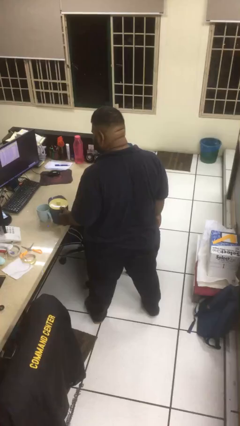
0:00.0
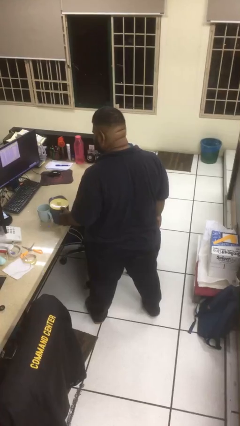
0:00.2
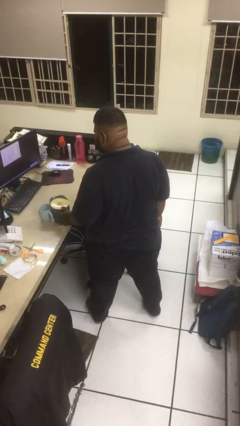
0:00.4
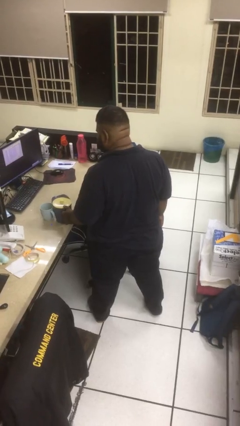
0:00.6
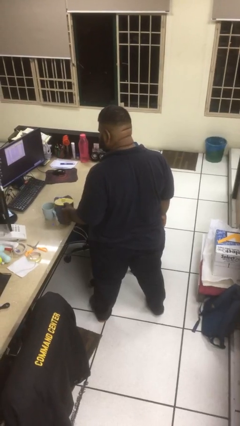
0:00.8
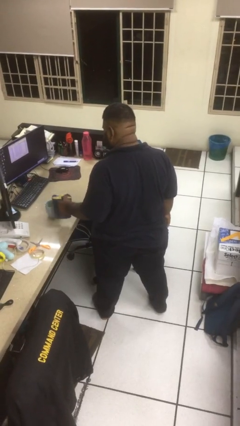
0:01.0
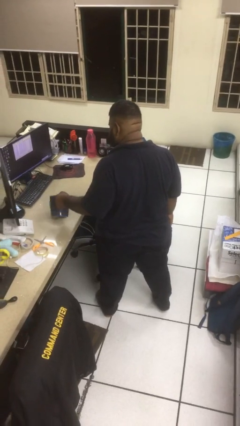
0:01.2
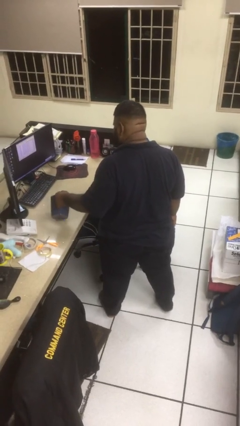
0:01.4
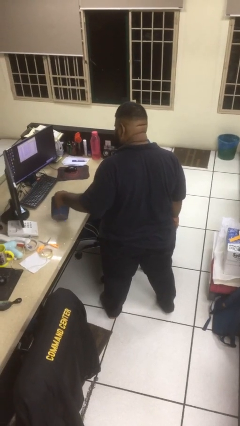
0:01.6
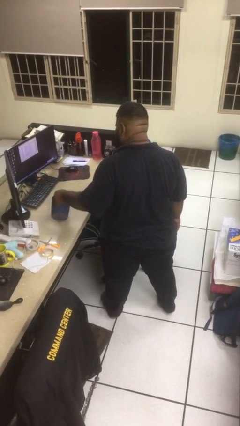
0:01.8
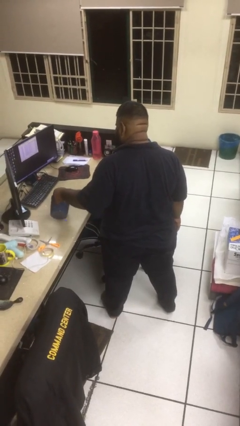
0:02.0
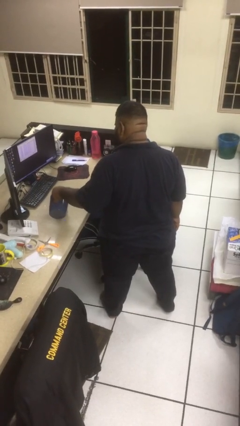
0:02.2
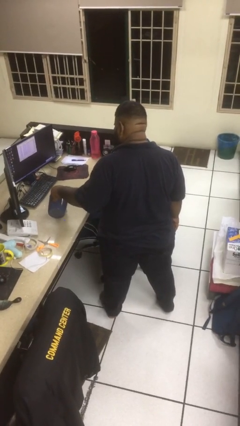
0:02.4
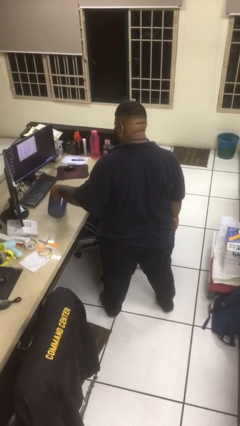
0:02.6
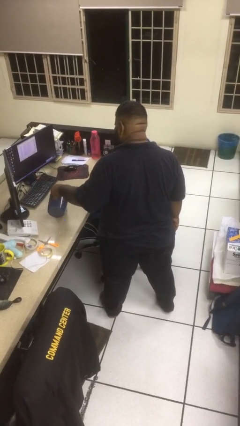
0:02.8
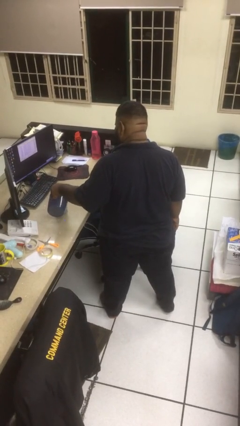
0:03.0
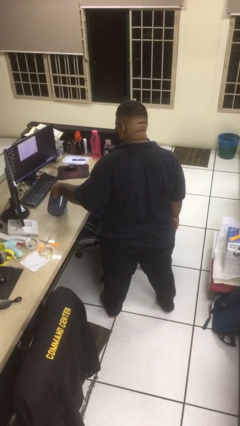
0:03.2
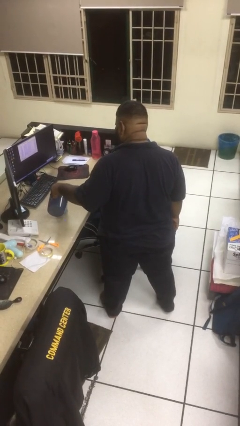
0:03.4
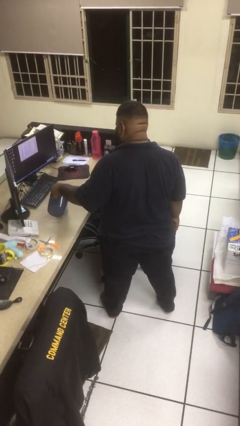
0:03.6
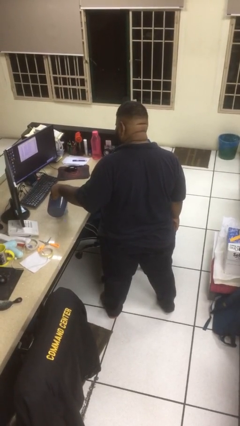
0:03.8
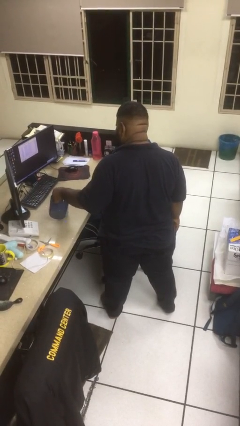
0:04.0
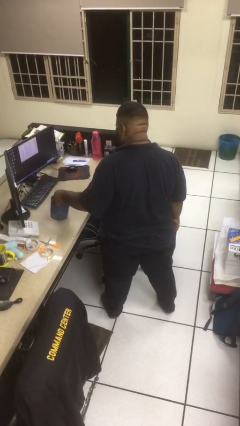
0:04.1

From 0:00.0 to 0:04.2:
person pours coffee into mug

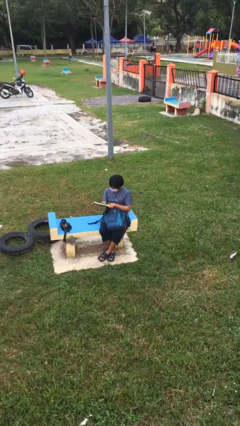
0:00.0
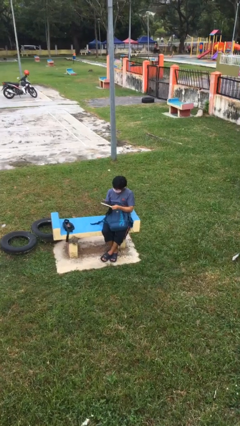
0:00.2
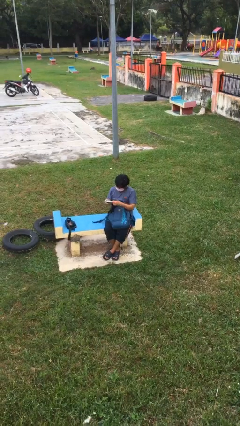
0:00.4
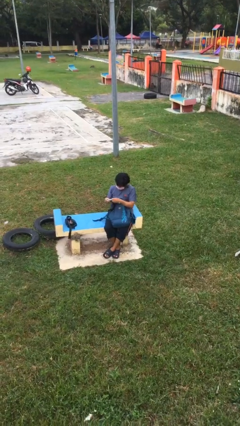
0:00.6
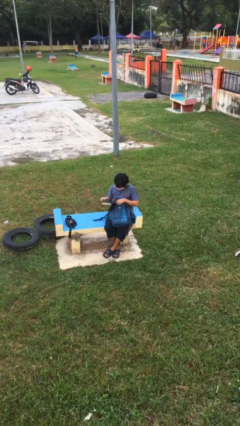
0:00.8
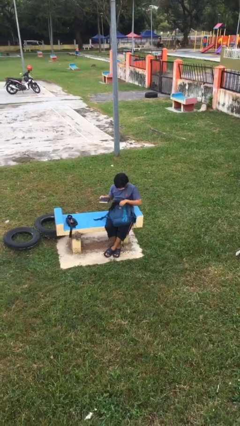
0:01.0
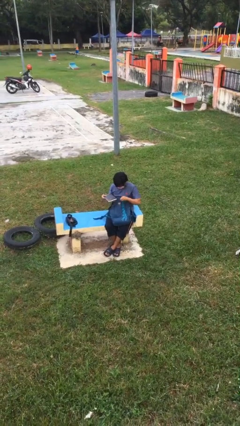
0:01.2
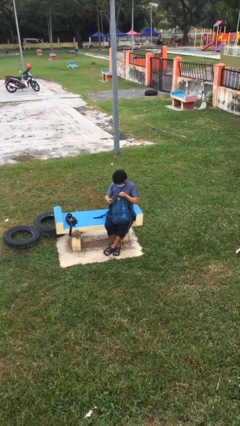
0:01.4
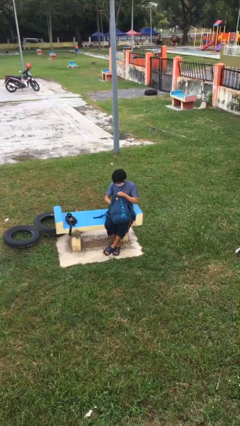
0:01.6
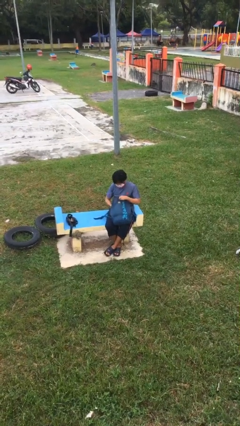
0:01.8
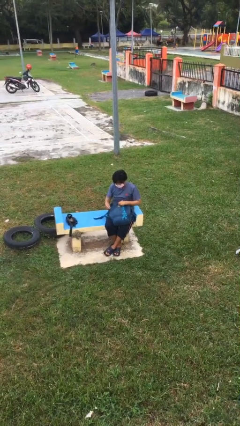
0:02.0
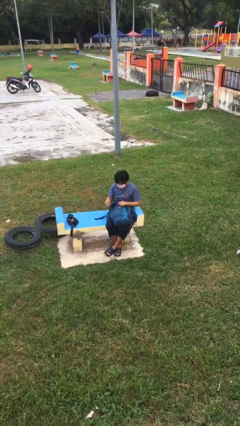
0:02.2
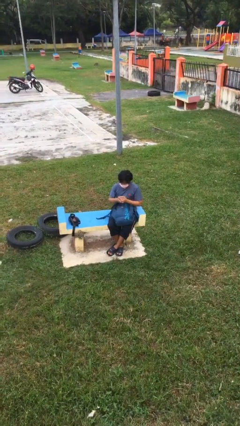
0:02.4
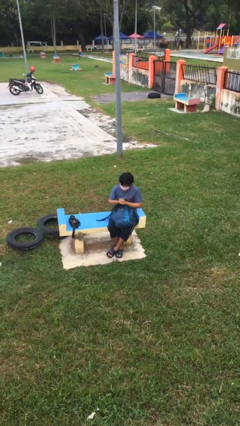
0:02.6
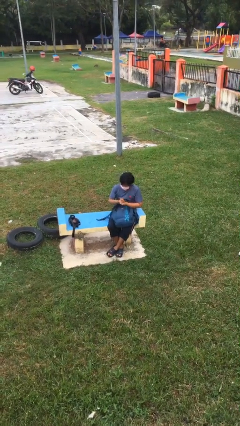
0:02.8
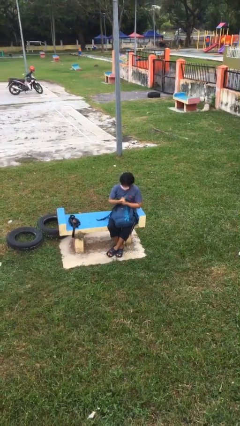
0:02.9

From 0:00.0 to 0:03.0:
person puts object into backpack

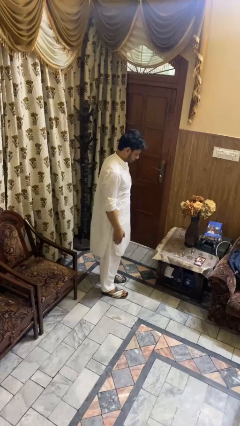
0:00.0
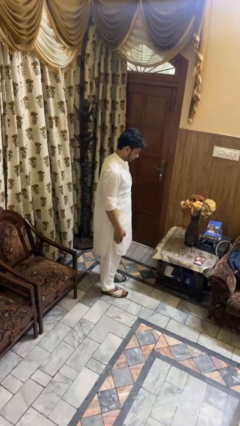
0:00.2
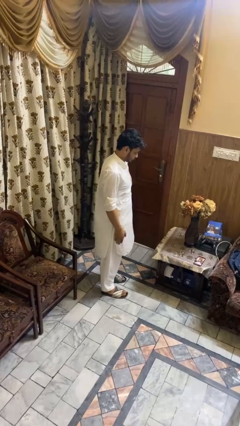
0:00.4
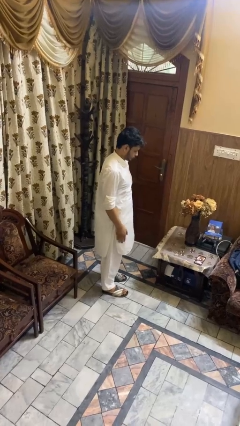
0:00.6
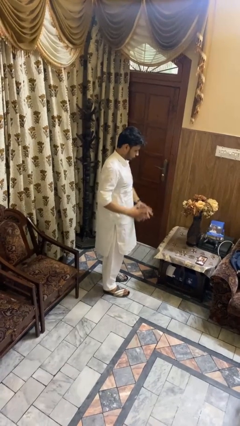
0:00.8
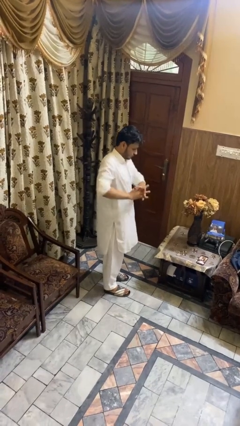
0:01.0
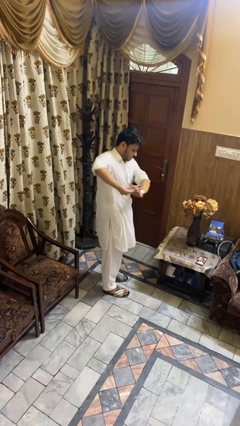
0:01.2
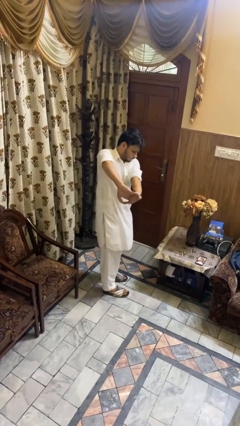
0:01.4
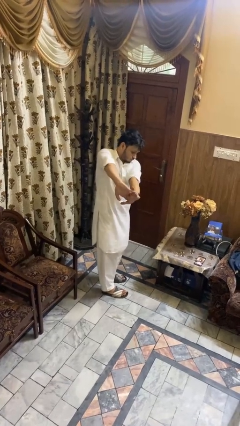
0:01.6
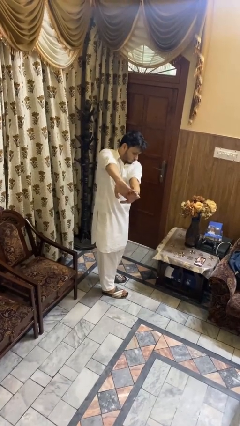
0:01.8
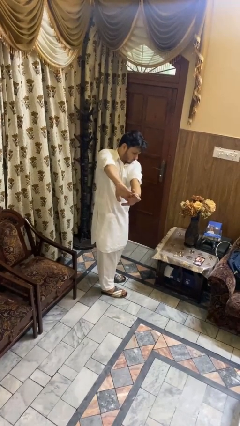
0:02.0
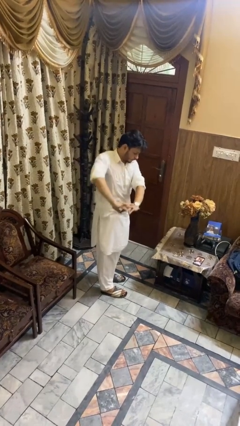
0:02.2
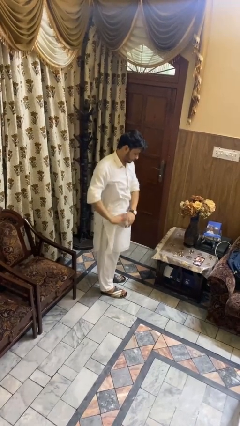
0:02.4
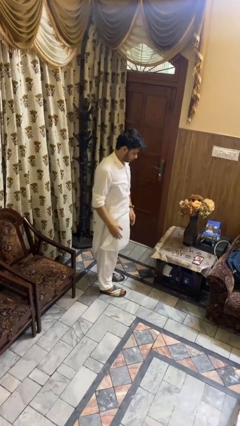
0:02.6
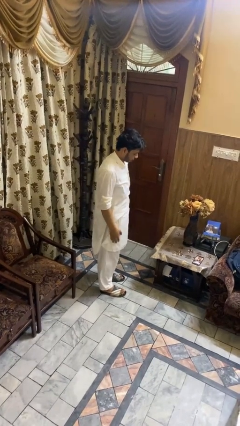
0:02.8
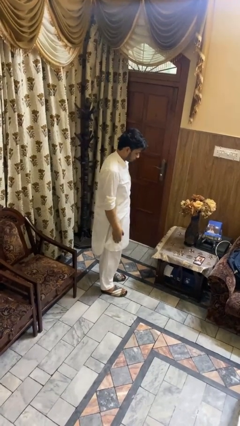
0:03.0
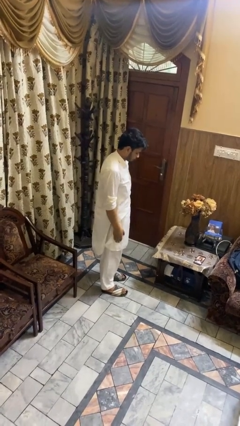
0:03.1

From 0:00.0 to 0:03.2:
person stretches arms to side

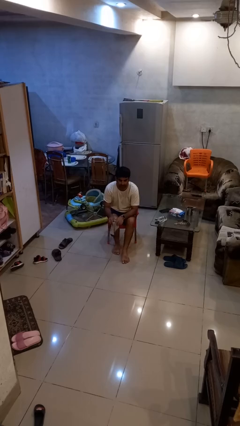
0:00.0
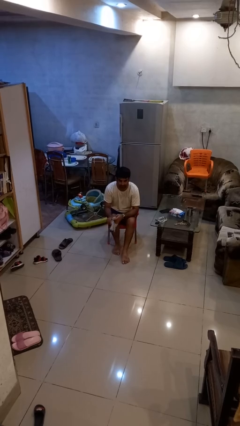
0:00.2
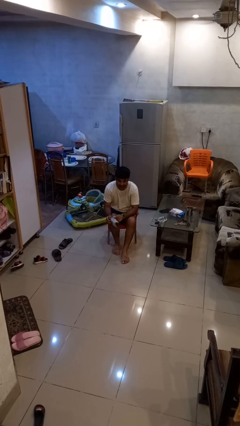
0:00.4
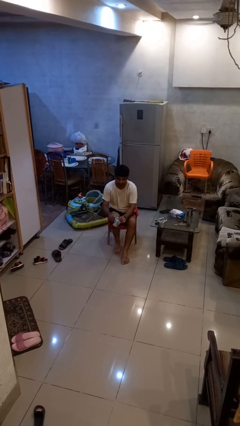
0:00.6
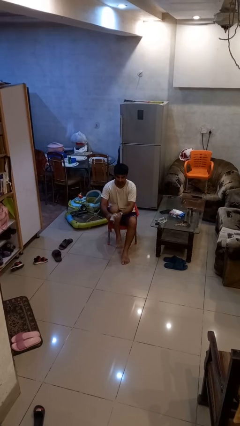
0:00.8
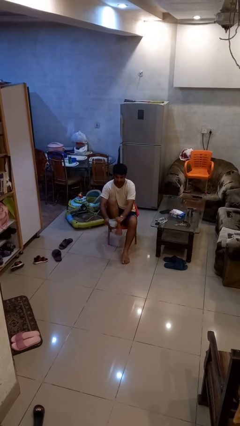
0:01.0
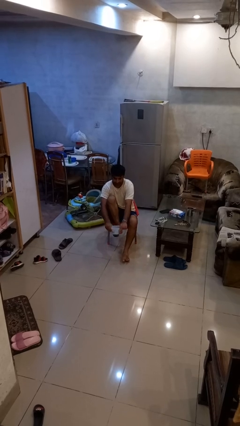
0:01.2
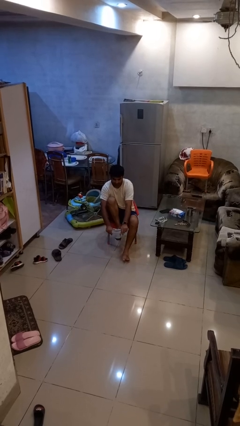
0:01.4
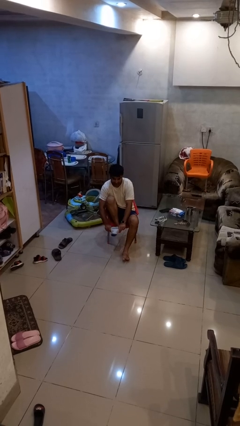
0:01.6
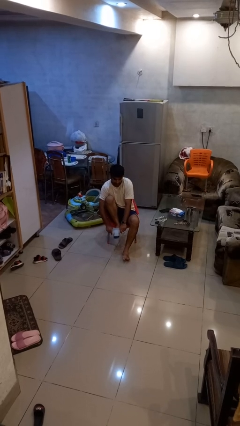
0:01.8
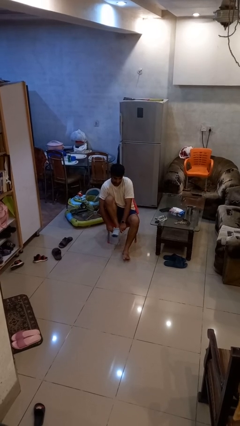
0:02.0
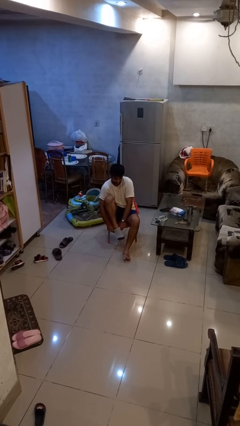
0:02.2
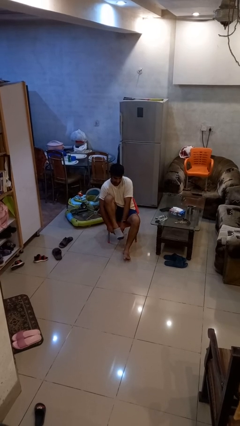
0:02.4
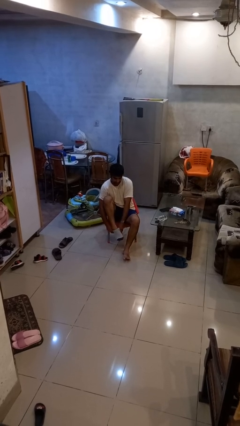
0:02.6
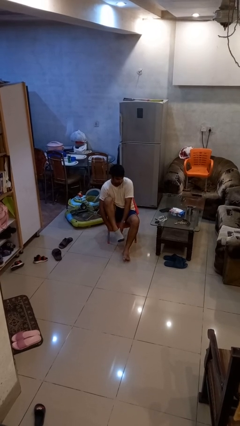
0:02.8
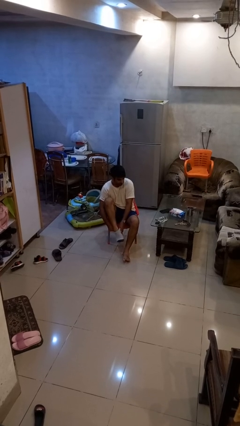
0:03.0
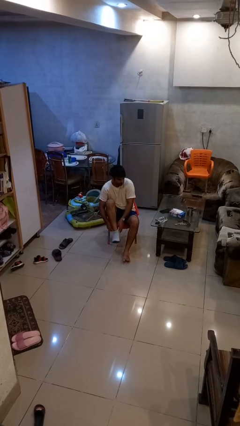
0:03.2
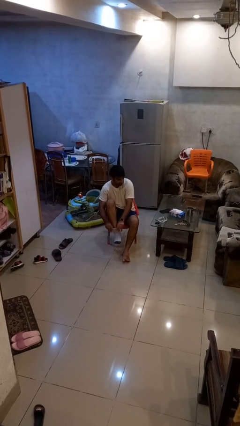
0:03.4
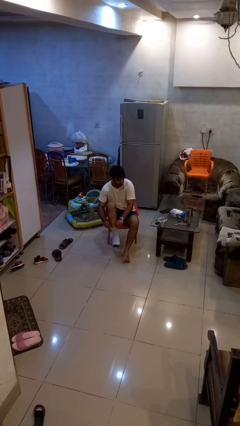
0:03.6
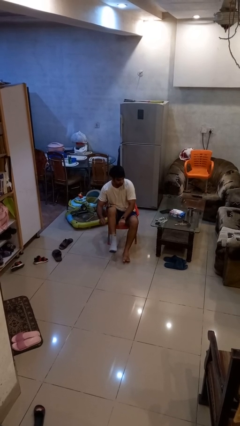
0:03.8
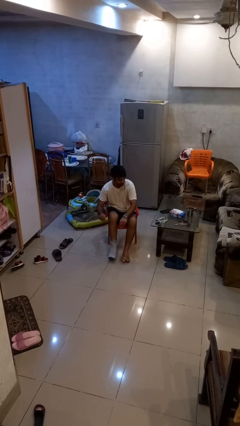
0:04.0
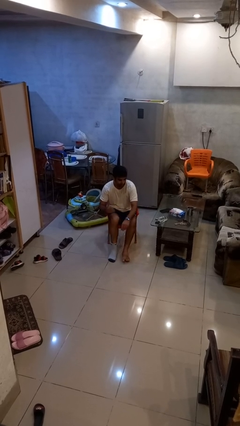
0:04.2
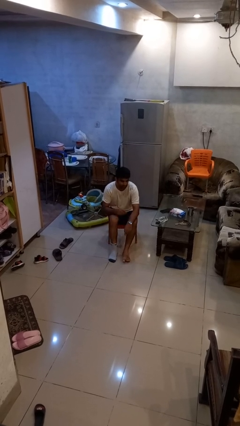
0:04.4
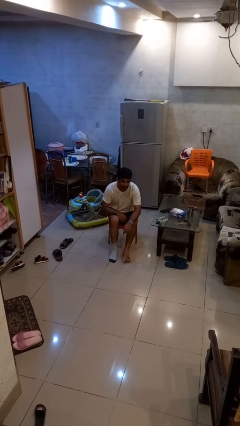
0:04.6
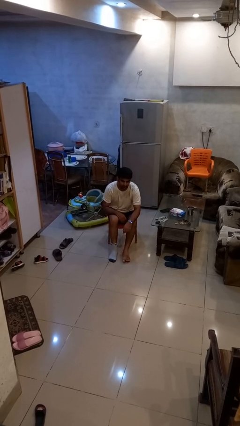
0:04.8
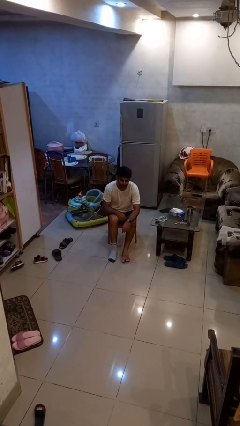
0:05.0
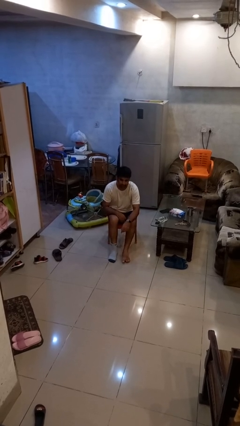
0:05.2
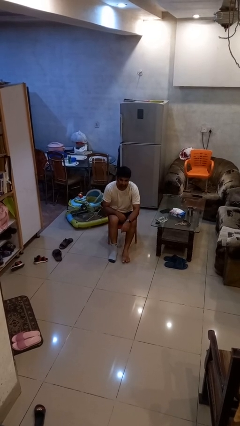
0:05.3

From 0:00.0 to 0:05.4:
person puts on socks

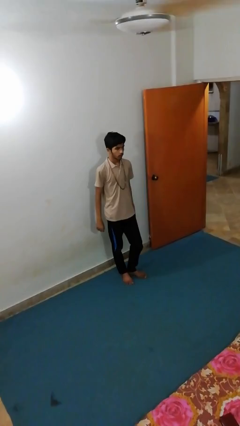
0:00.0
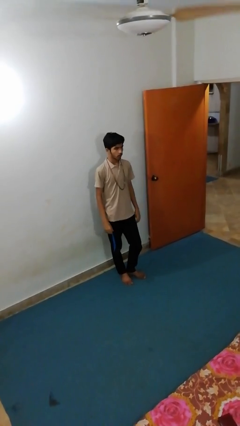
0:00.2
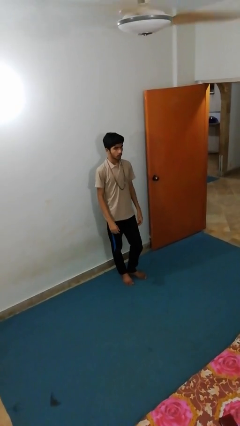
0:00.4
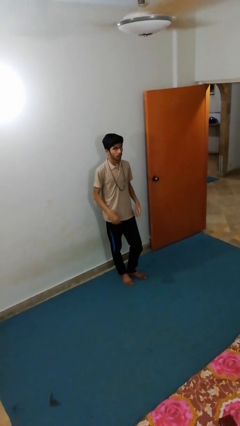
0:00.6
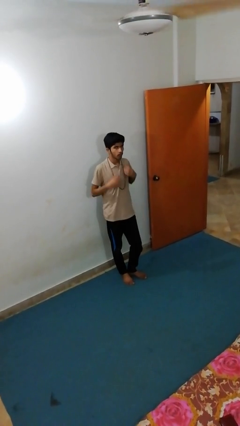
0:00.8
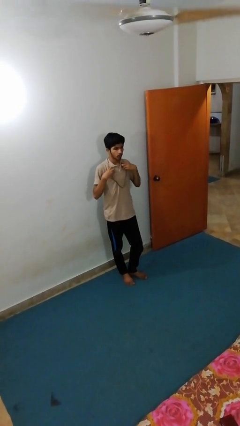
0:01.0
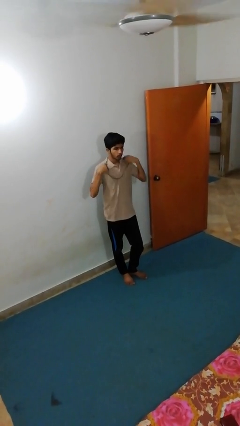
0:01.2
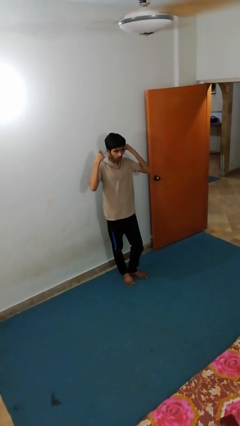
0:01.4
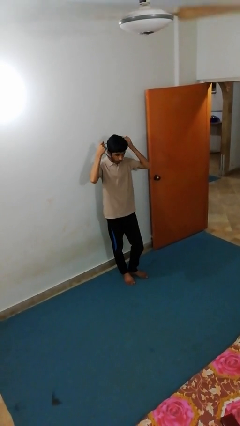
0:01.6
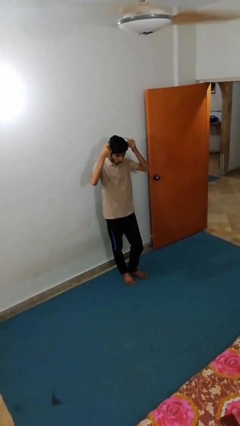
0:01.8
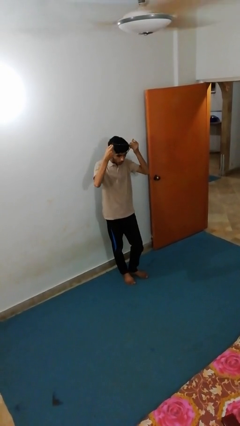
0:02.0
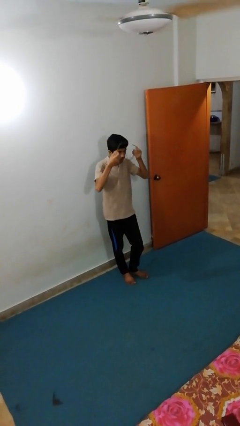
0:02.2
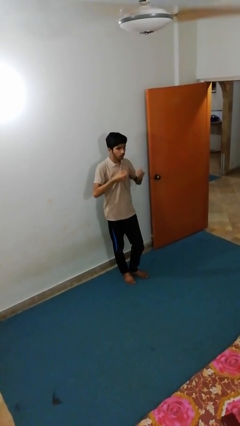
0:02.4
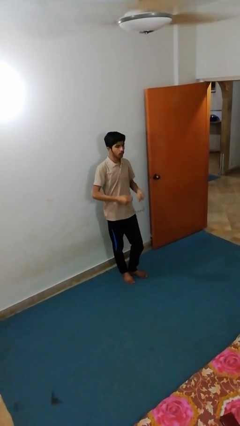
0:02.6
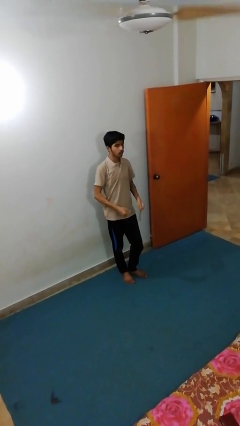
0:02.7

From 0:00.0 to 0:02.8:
person takes off necklace
